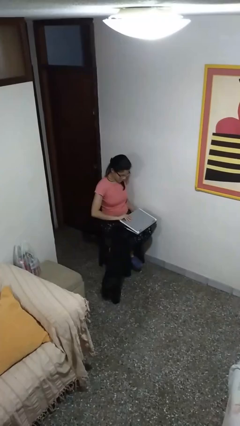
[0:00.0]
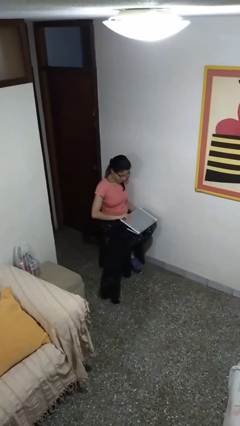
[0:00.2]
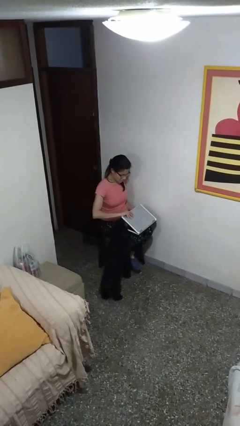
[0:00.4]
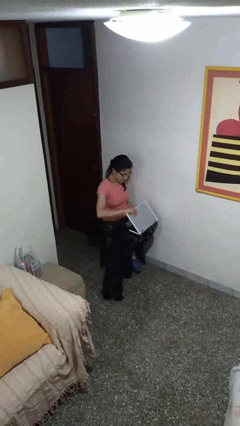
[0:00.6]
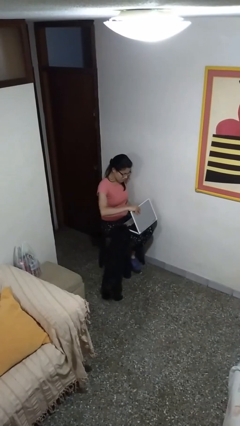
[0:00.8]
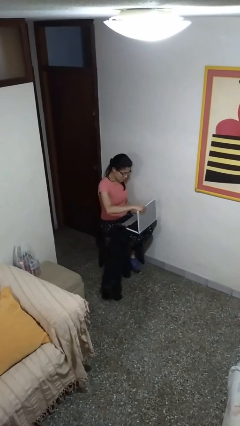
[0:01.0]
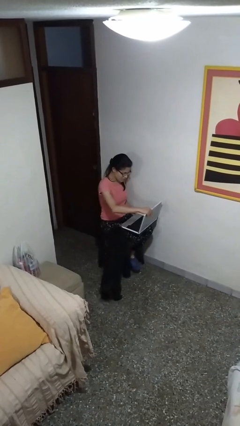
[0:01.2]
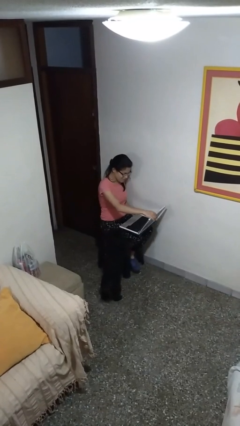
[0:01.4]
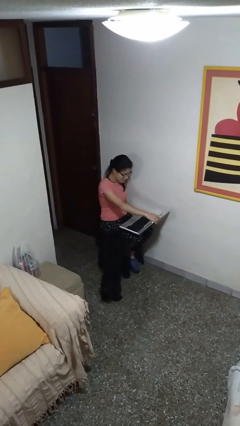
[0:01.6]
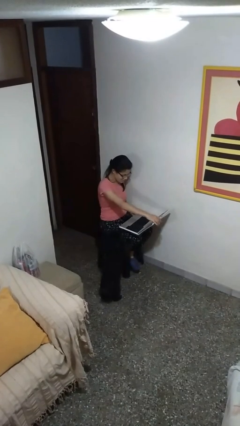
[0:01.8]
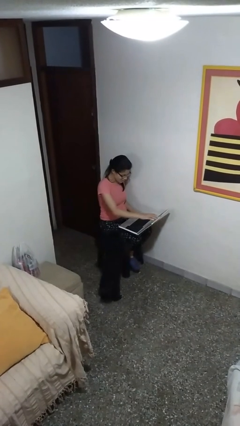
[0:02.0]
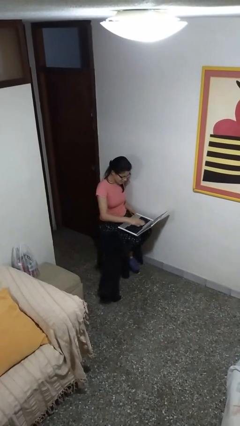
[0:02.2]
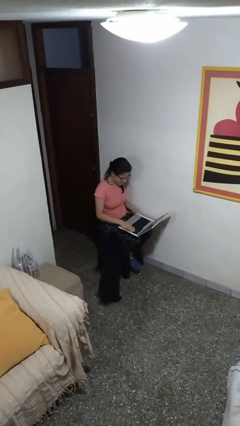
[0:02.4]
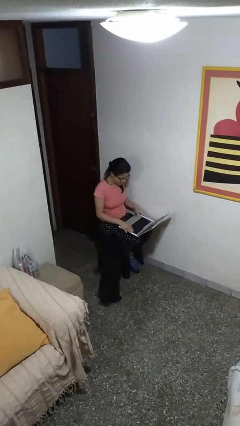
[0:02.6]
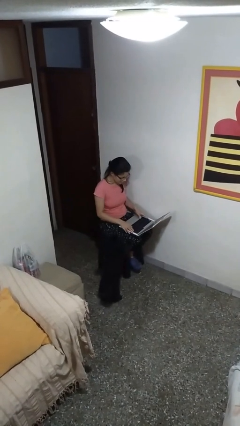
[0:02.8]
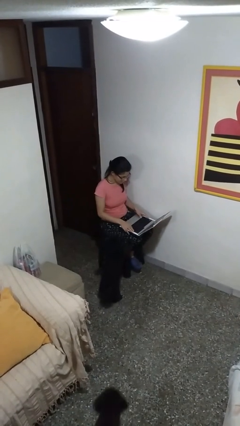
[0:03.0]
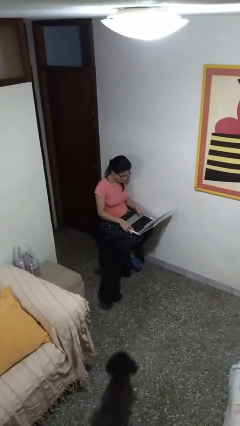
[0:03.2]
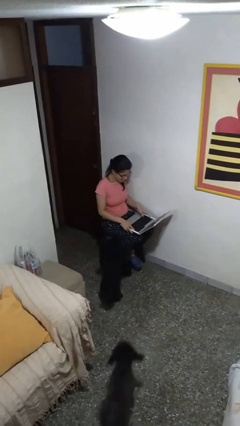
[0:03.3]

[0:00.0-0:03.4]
person opens laptop

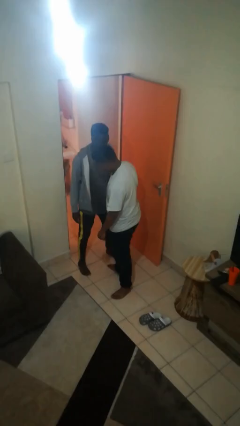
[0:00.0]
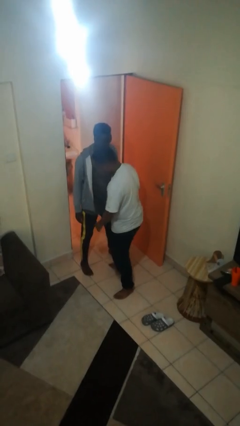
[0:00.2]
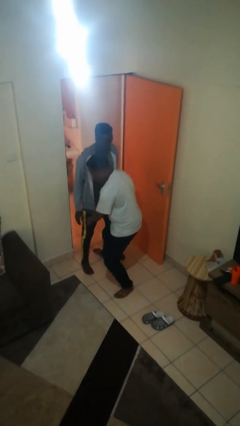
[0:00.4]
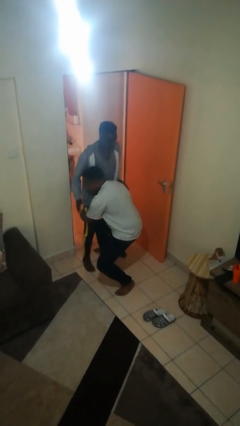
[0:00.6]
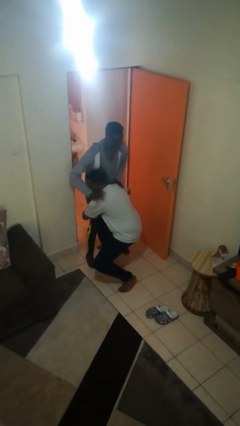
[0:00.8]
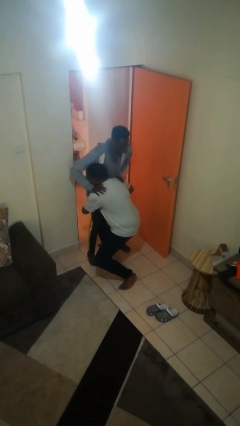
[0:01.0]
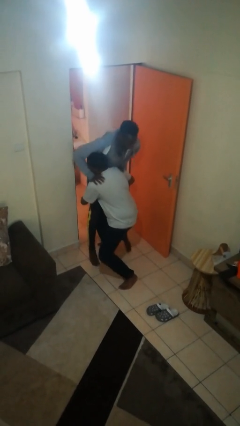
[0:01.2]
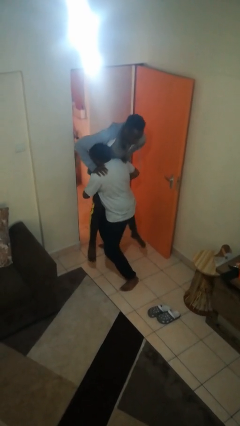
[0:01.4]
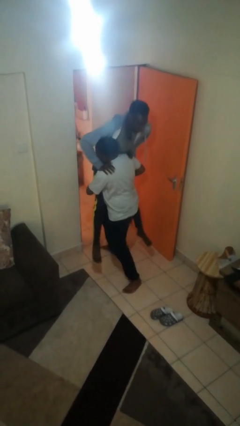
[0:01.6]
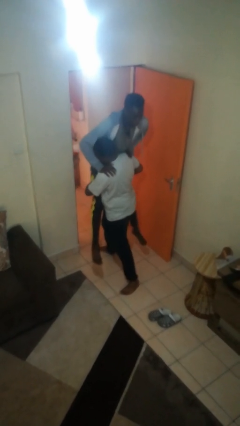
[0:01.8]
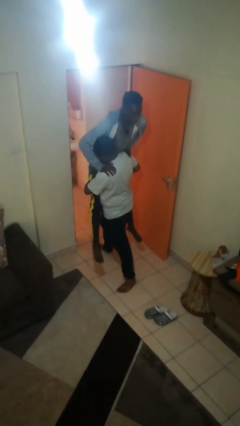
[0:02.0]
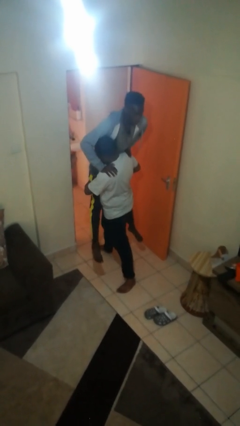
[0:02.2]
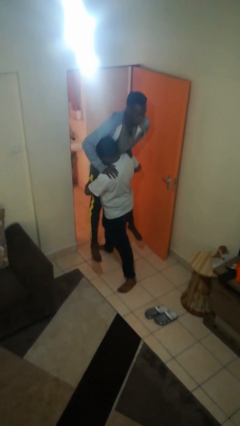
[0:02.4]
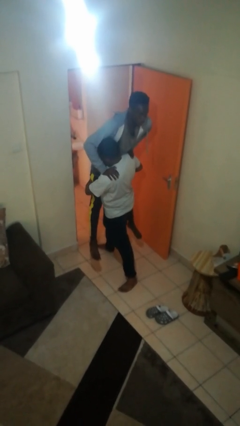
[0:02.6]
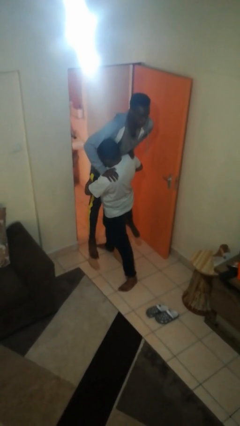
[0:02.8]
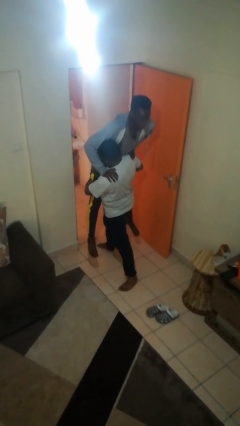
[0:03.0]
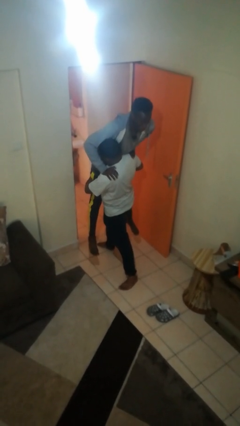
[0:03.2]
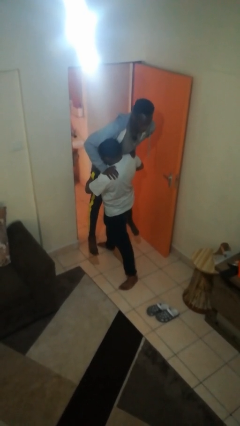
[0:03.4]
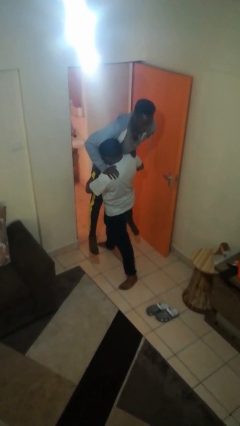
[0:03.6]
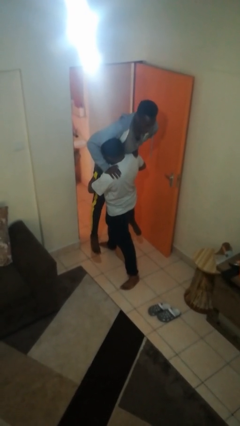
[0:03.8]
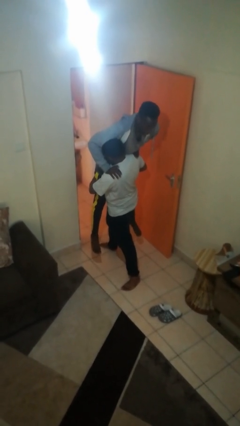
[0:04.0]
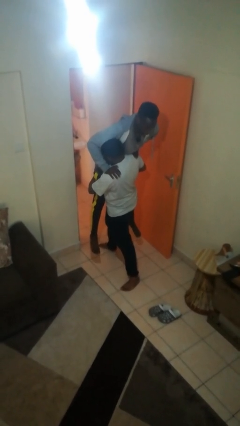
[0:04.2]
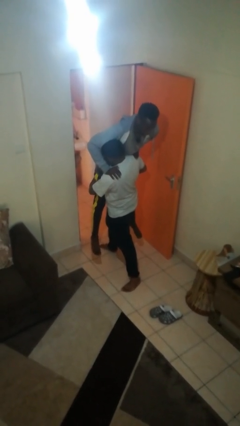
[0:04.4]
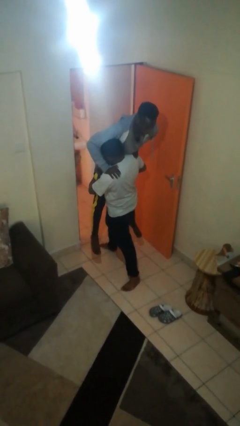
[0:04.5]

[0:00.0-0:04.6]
person picks up person

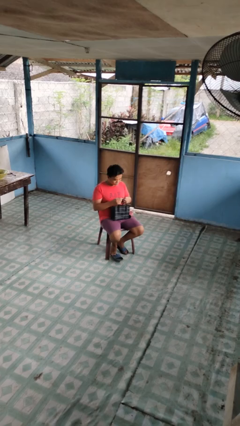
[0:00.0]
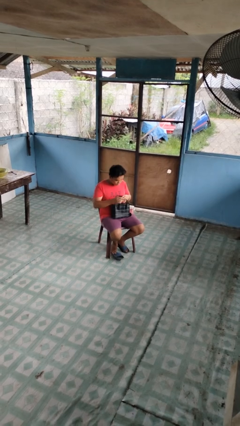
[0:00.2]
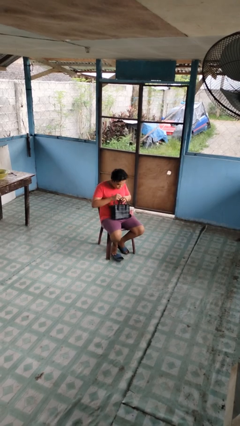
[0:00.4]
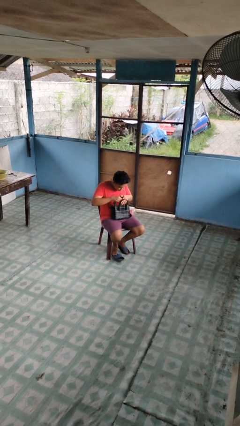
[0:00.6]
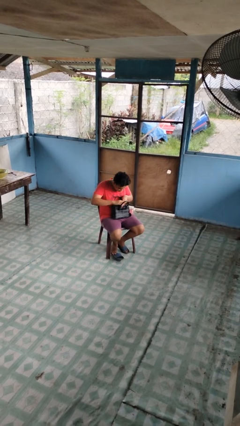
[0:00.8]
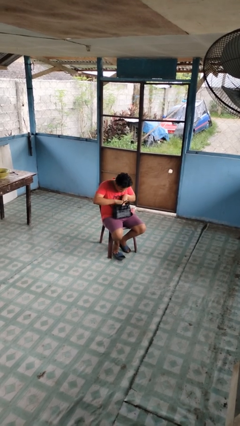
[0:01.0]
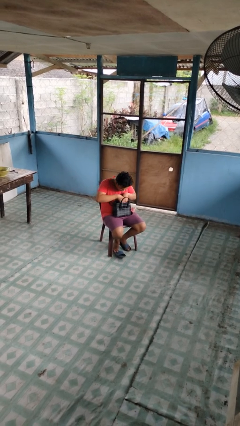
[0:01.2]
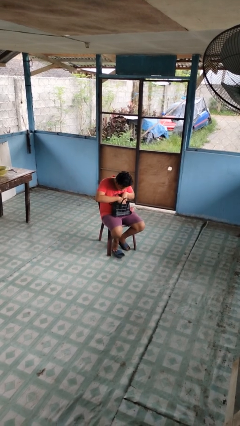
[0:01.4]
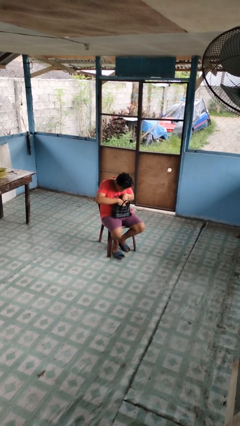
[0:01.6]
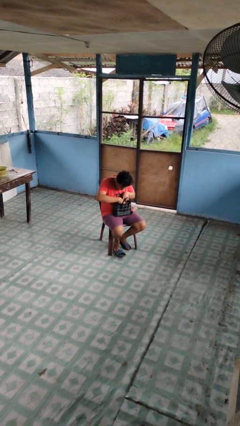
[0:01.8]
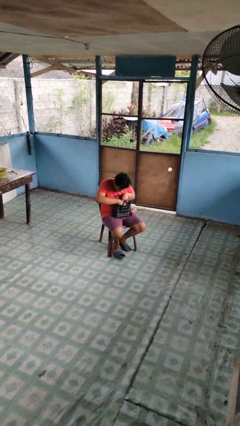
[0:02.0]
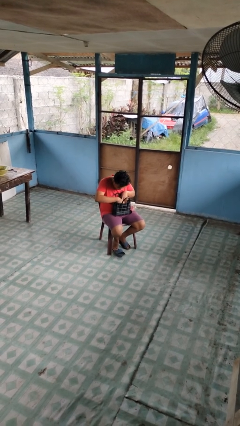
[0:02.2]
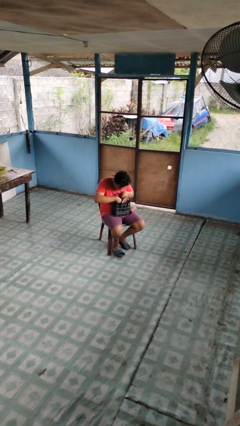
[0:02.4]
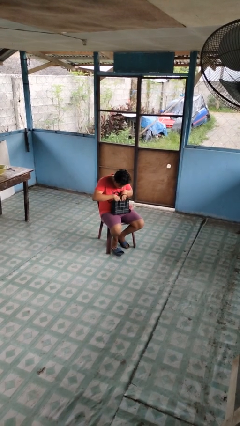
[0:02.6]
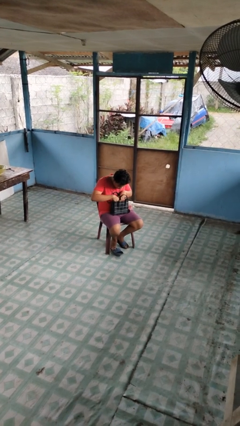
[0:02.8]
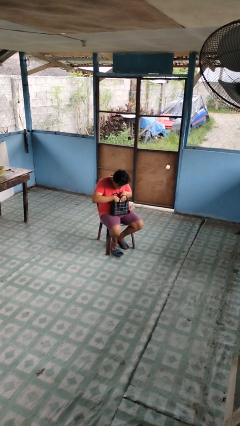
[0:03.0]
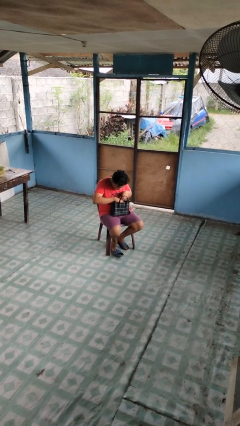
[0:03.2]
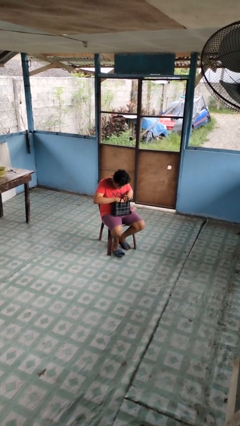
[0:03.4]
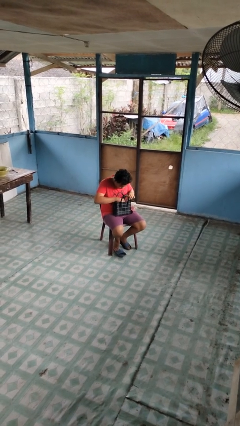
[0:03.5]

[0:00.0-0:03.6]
person searches in purse

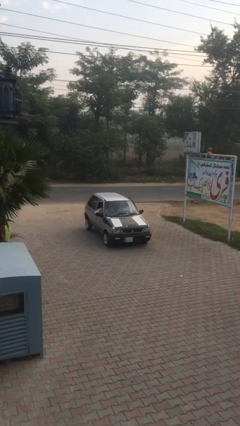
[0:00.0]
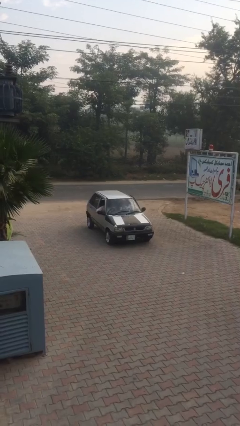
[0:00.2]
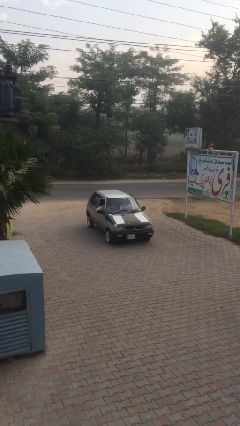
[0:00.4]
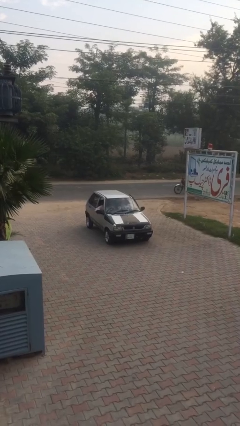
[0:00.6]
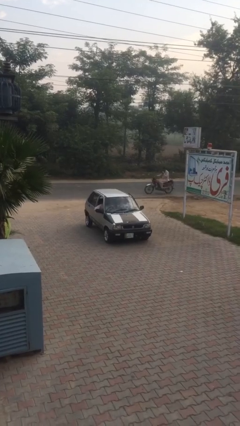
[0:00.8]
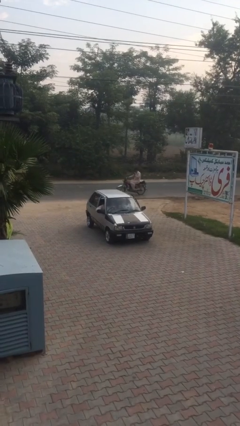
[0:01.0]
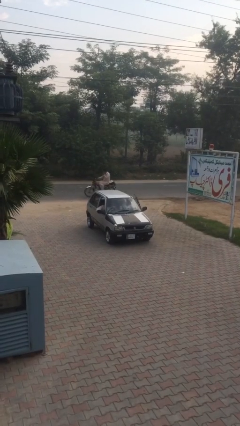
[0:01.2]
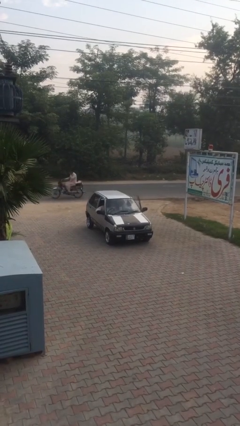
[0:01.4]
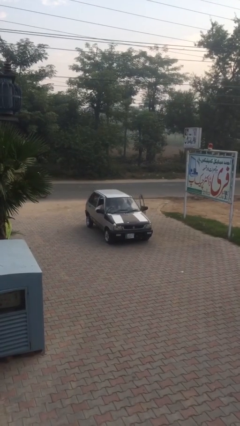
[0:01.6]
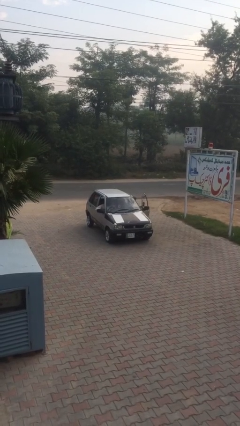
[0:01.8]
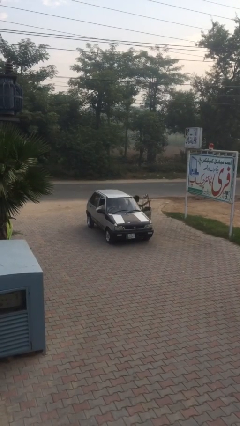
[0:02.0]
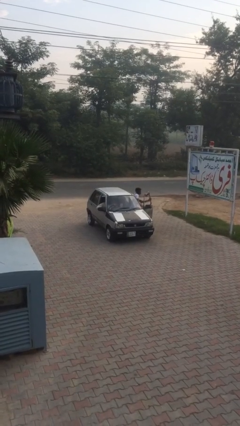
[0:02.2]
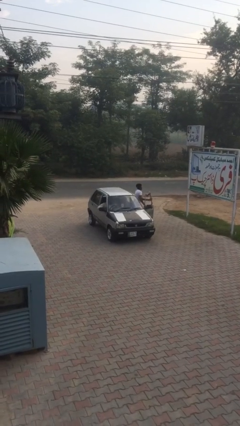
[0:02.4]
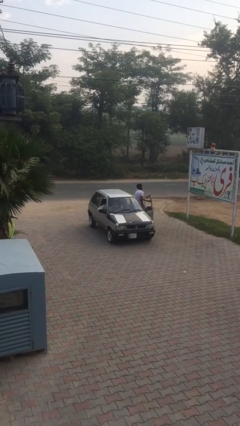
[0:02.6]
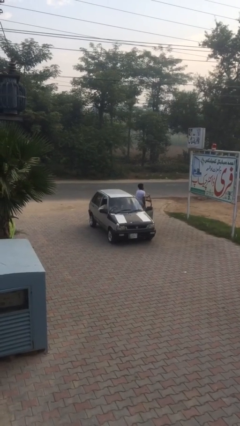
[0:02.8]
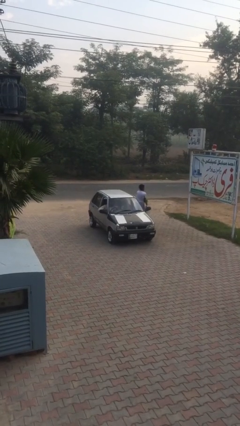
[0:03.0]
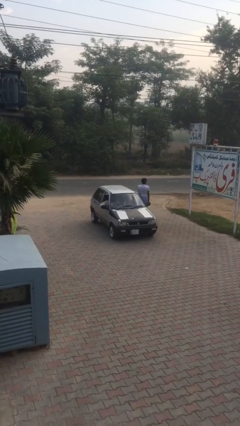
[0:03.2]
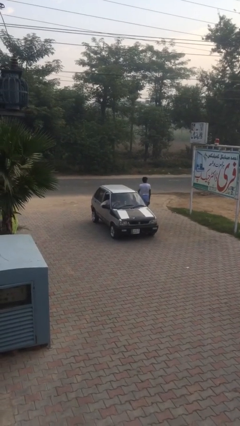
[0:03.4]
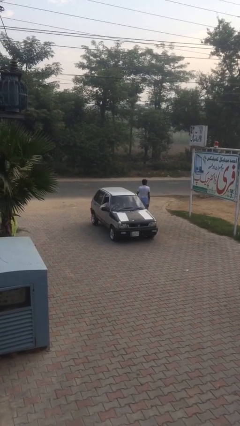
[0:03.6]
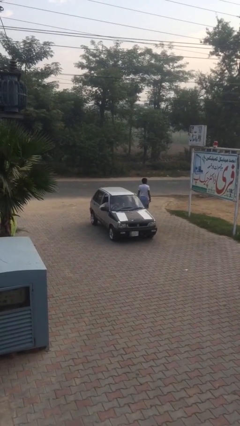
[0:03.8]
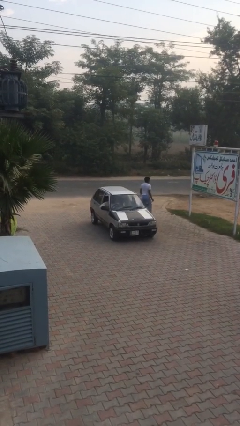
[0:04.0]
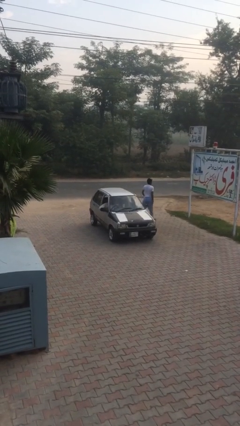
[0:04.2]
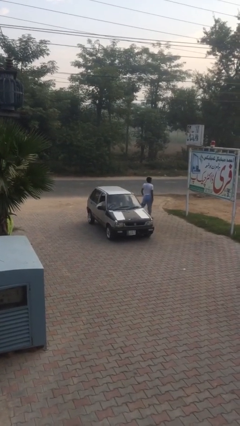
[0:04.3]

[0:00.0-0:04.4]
car drops off person

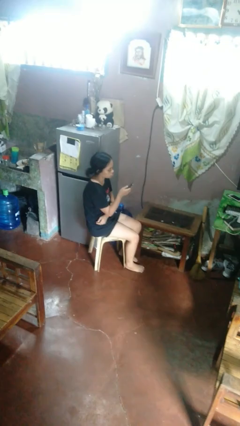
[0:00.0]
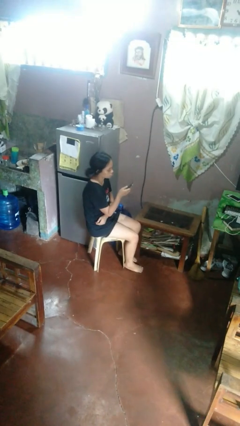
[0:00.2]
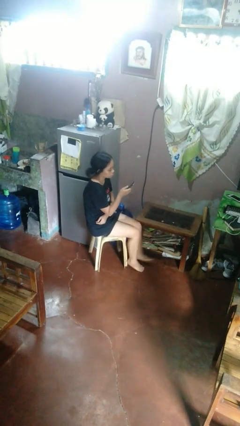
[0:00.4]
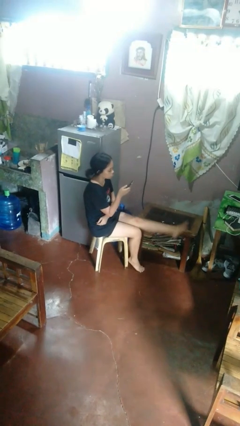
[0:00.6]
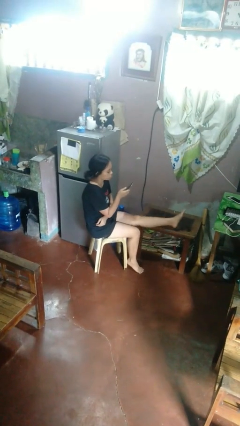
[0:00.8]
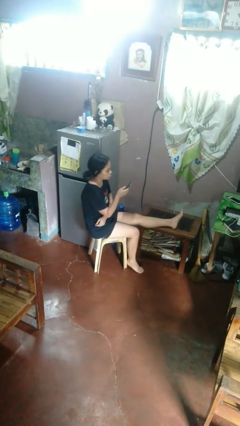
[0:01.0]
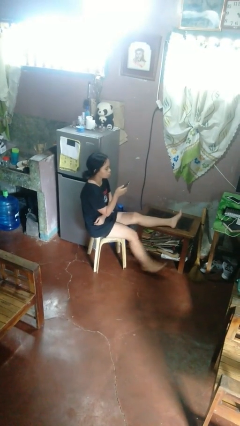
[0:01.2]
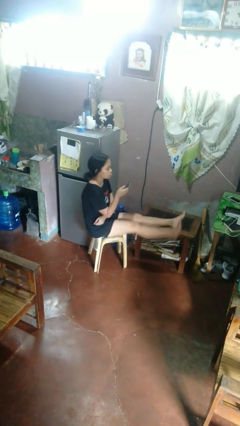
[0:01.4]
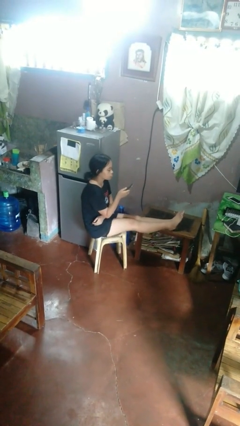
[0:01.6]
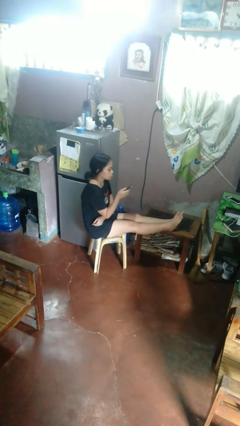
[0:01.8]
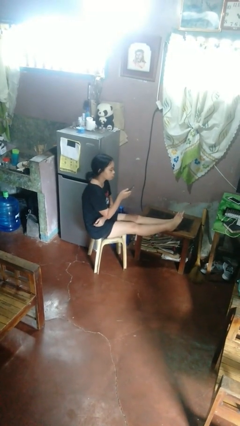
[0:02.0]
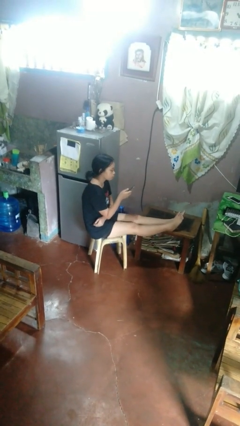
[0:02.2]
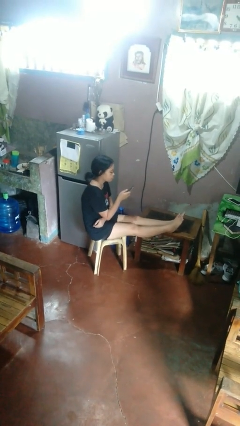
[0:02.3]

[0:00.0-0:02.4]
person puts feet up
